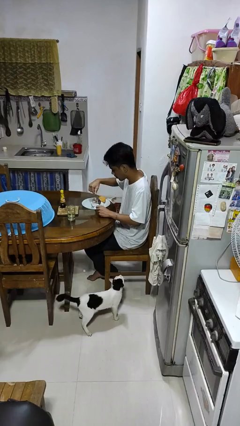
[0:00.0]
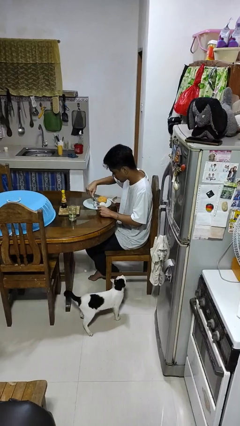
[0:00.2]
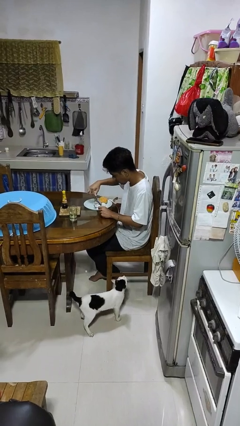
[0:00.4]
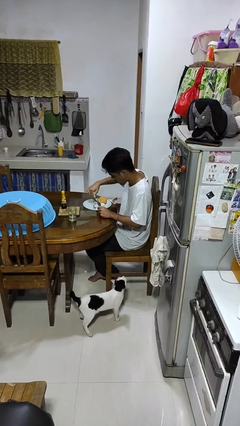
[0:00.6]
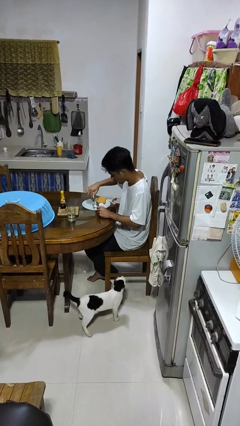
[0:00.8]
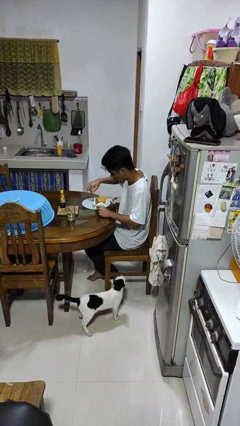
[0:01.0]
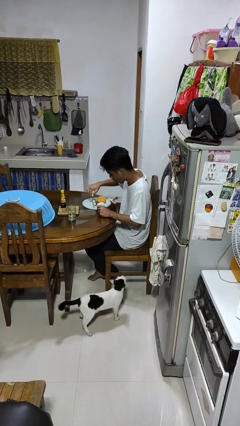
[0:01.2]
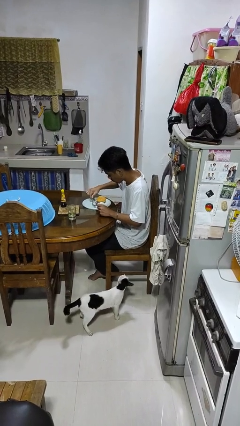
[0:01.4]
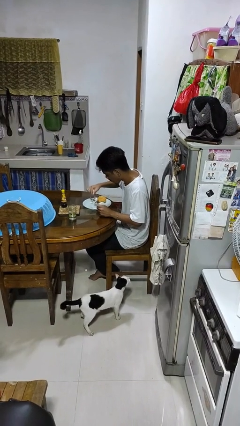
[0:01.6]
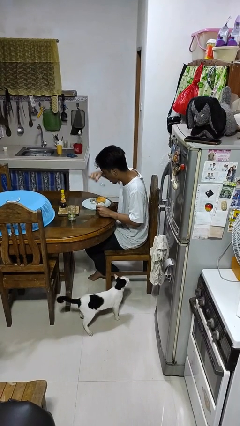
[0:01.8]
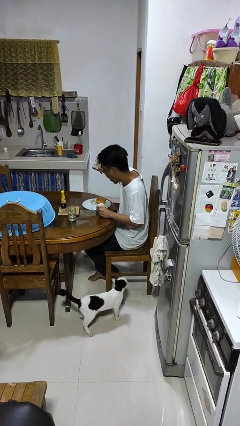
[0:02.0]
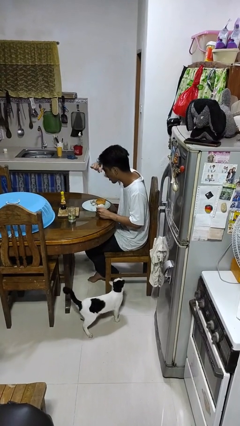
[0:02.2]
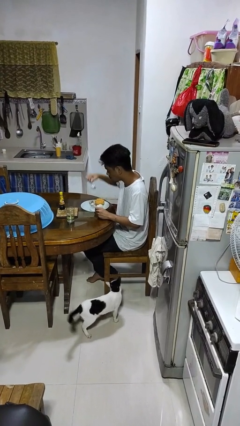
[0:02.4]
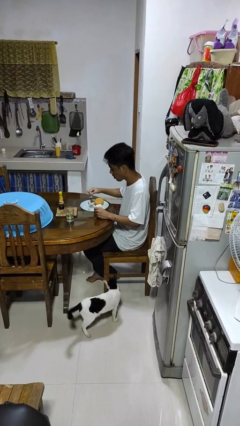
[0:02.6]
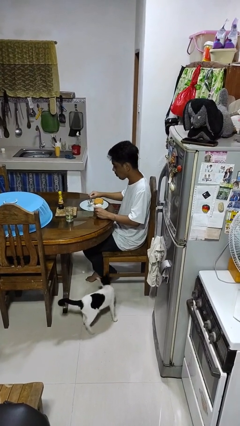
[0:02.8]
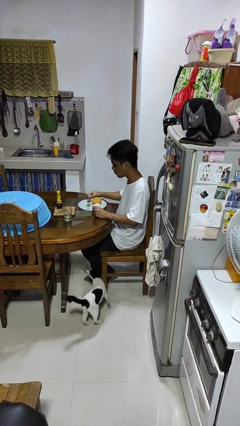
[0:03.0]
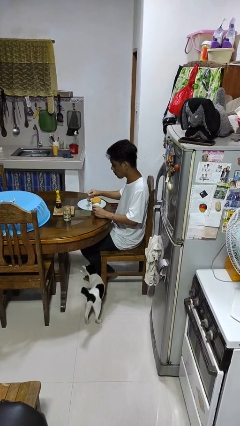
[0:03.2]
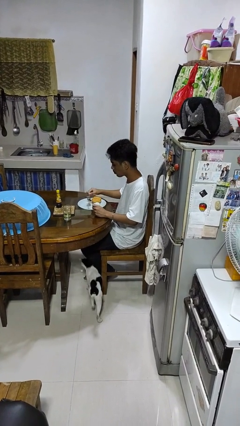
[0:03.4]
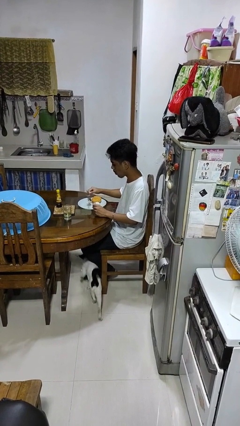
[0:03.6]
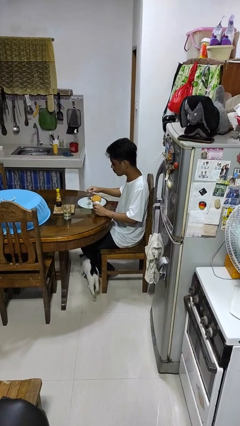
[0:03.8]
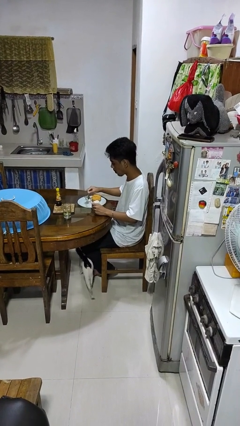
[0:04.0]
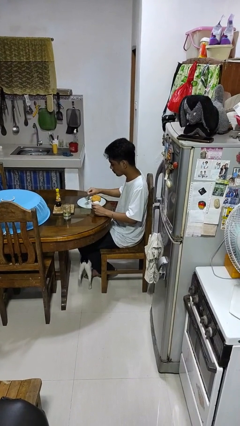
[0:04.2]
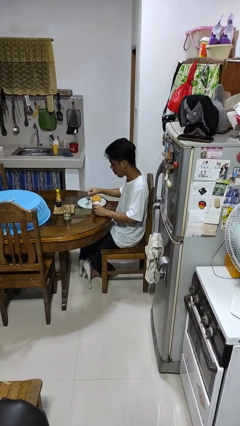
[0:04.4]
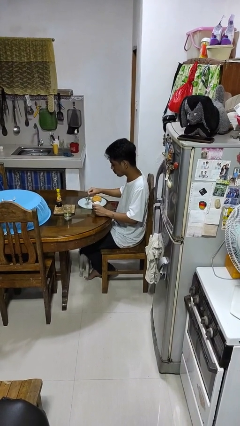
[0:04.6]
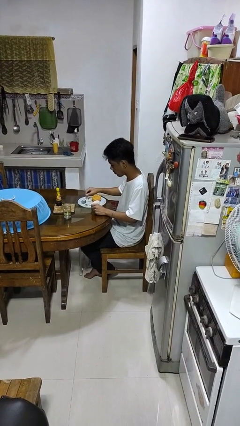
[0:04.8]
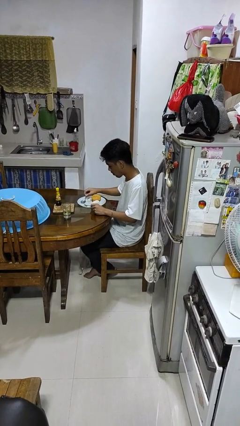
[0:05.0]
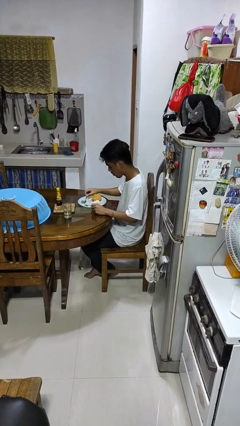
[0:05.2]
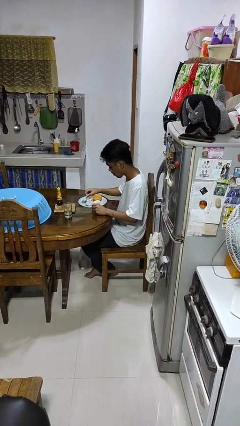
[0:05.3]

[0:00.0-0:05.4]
person eats with utensil

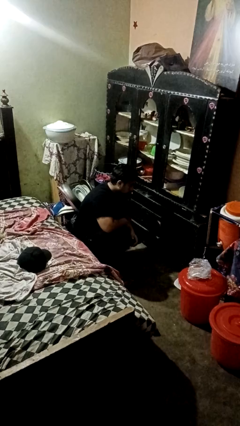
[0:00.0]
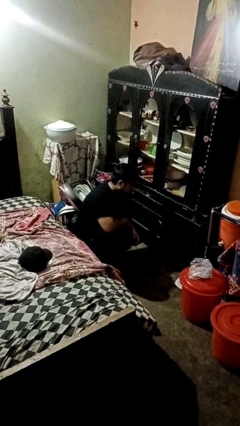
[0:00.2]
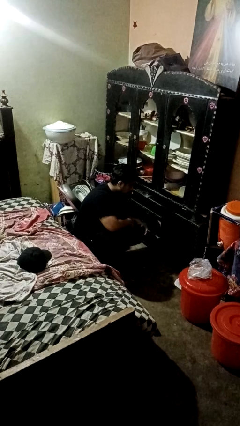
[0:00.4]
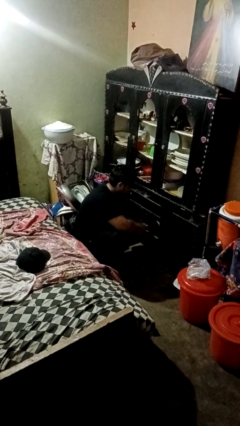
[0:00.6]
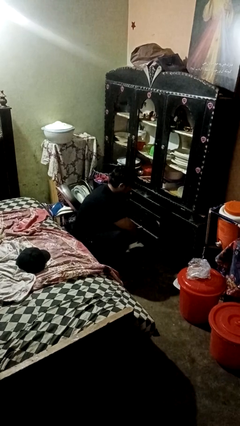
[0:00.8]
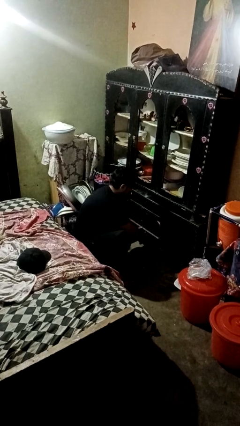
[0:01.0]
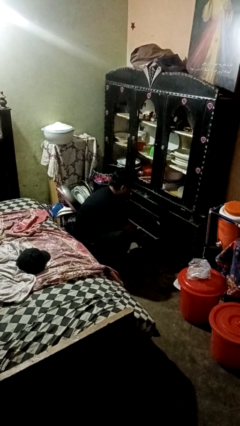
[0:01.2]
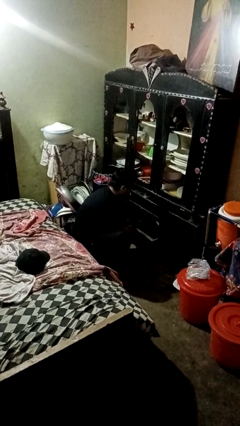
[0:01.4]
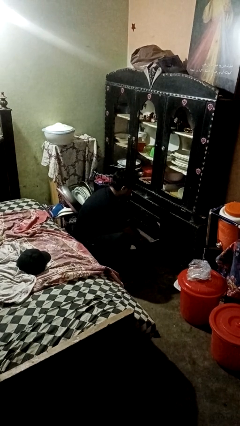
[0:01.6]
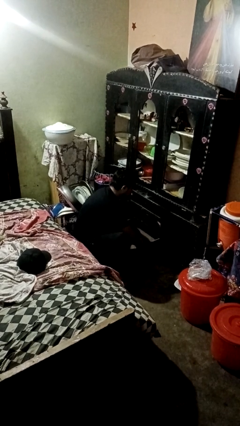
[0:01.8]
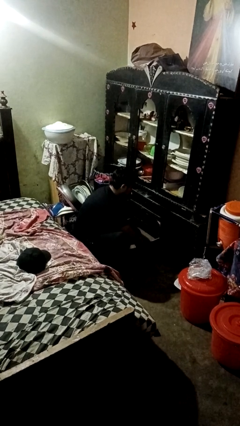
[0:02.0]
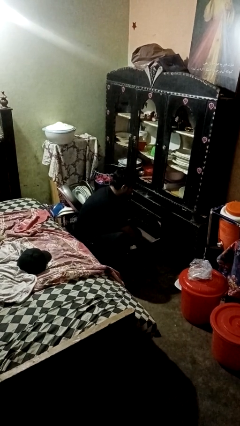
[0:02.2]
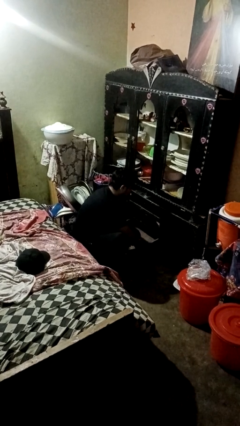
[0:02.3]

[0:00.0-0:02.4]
person opens kitchen drawer

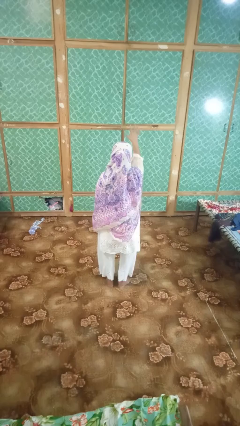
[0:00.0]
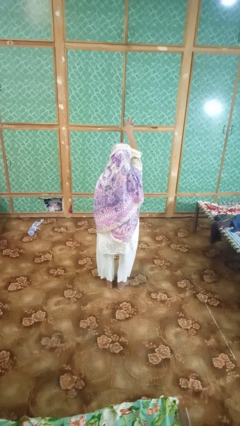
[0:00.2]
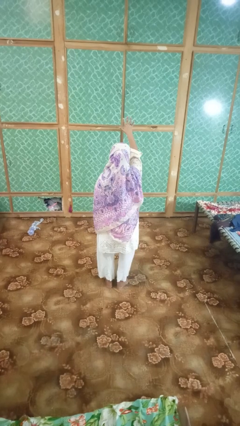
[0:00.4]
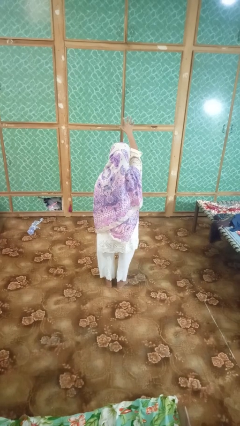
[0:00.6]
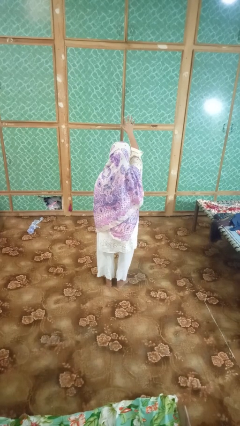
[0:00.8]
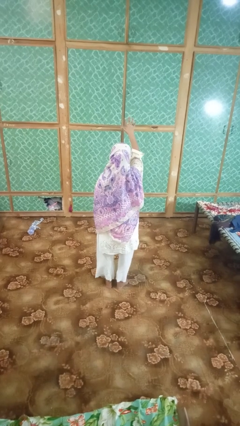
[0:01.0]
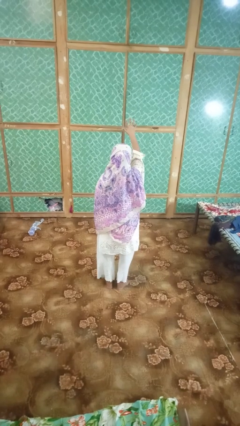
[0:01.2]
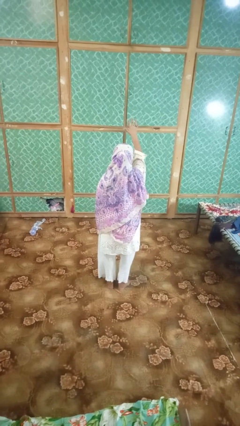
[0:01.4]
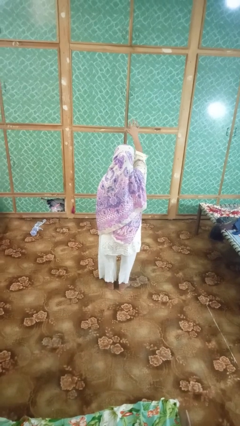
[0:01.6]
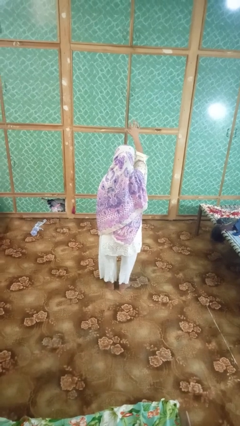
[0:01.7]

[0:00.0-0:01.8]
person gestures number five

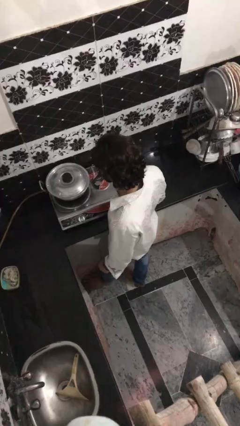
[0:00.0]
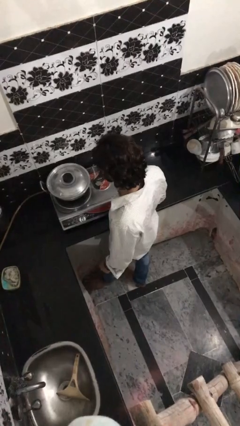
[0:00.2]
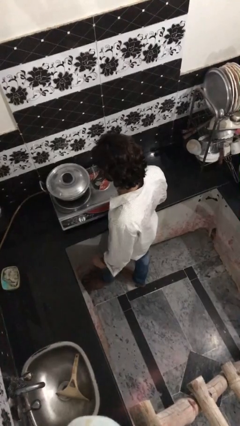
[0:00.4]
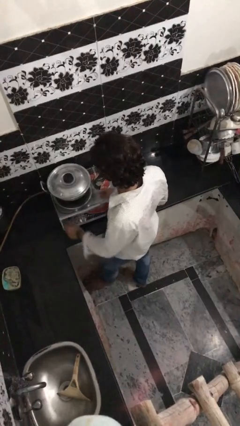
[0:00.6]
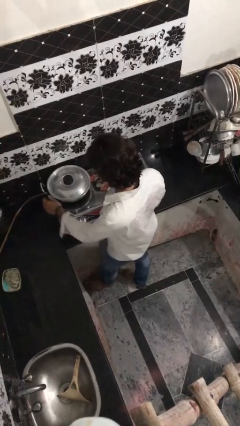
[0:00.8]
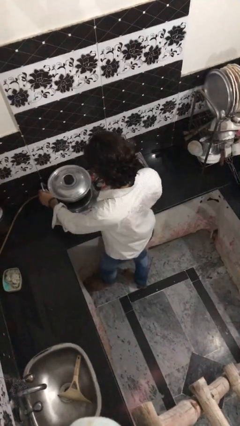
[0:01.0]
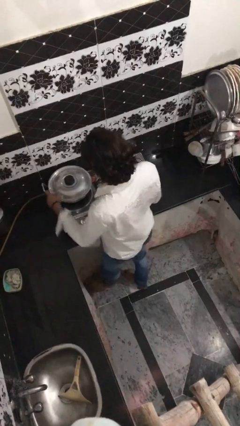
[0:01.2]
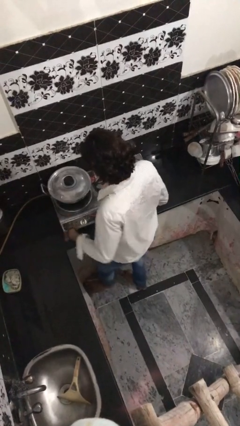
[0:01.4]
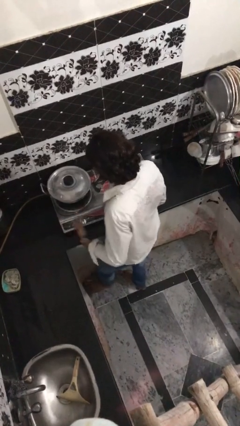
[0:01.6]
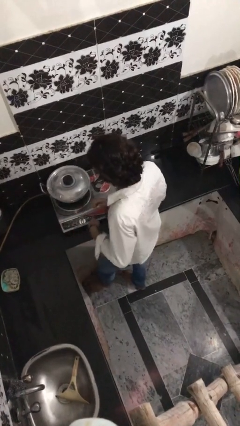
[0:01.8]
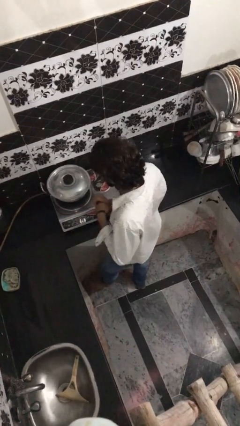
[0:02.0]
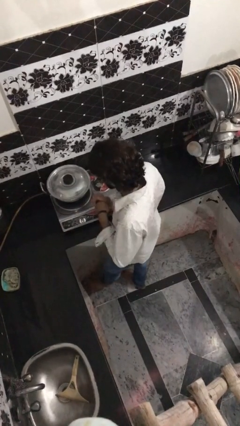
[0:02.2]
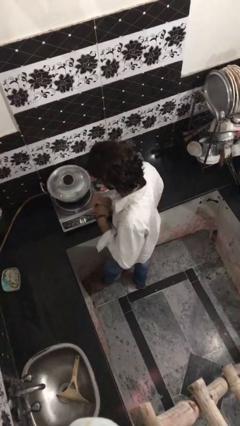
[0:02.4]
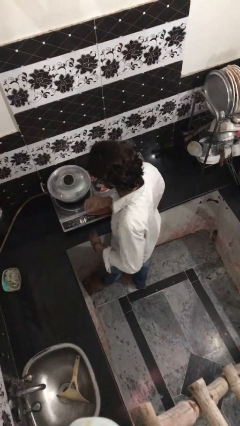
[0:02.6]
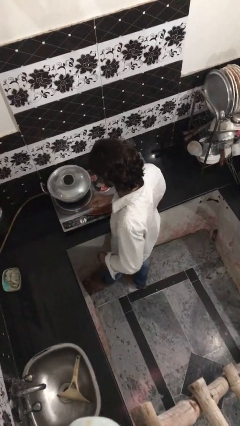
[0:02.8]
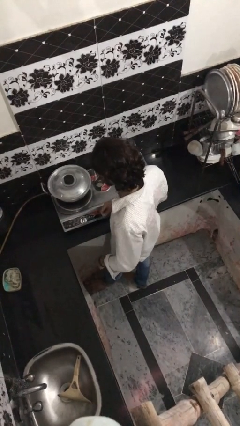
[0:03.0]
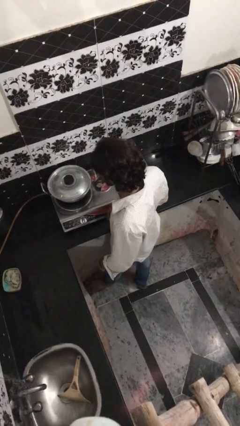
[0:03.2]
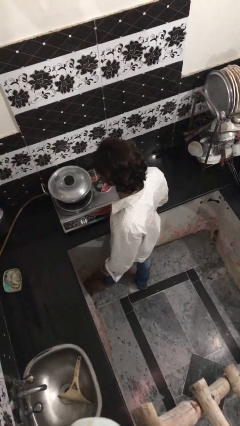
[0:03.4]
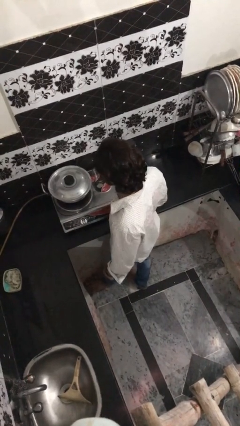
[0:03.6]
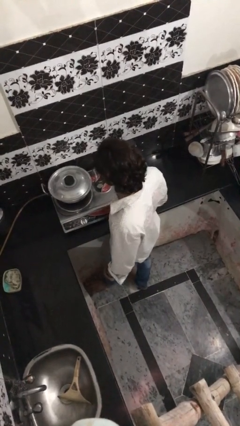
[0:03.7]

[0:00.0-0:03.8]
person burns hand

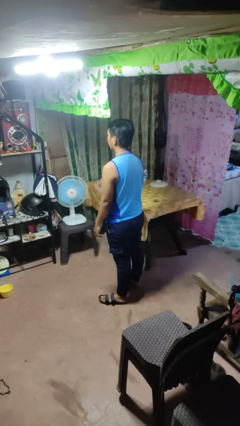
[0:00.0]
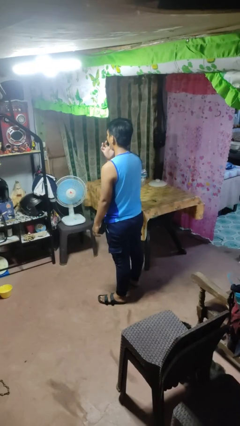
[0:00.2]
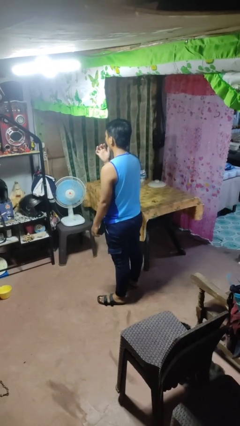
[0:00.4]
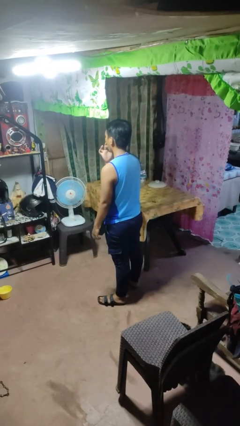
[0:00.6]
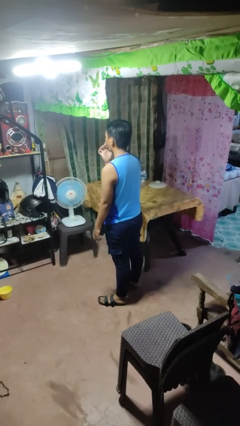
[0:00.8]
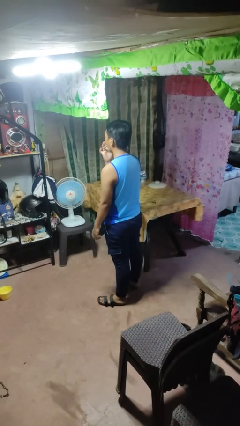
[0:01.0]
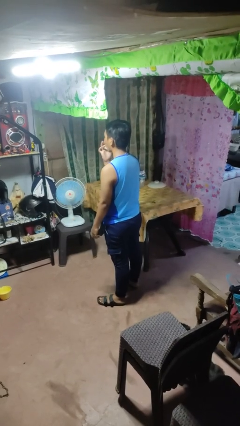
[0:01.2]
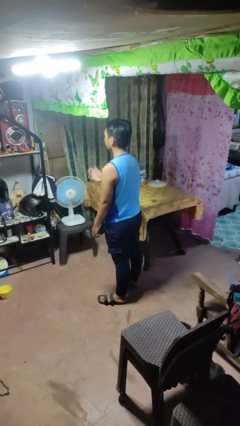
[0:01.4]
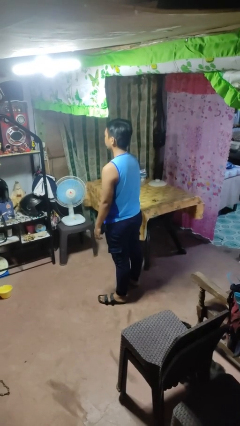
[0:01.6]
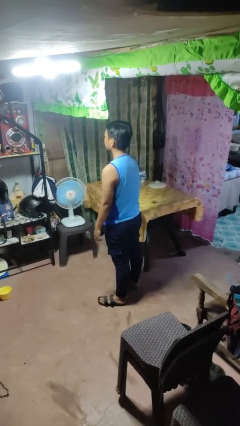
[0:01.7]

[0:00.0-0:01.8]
person licks fingers

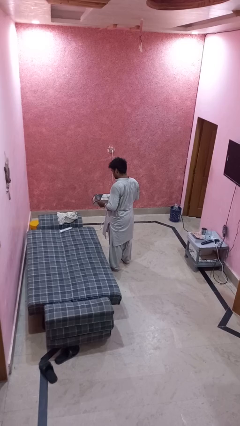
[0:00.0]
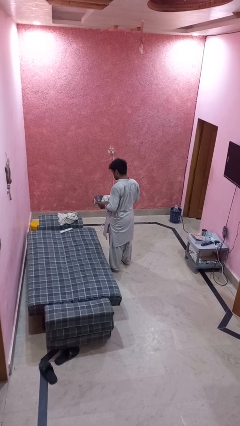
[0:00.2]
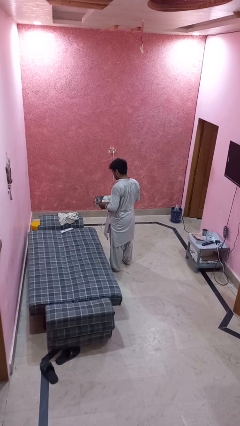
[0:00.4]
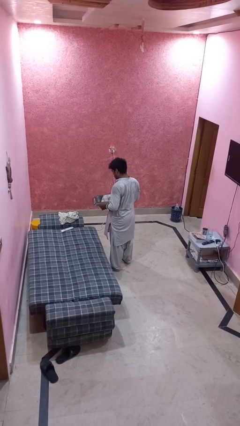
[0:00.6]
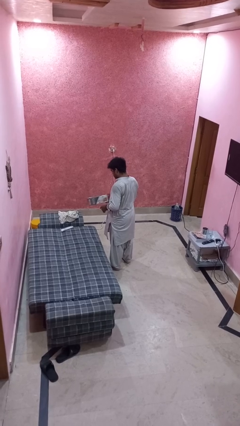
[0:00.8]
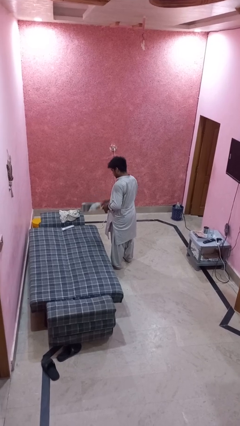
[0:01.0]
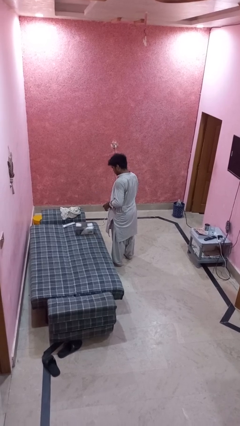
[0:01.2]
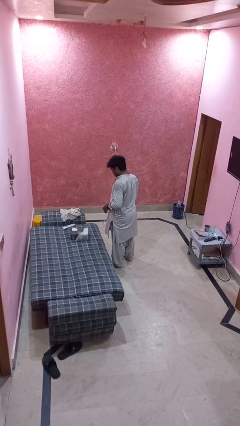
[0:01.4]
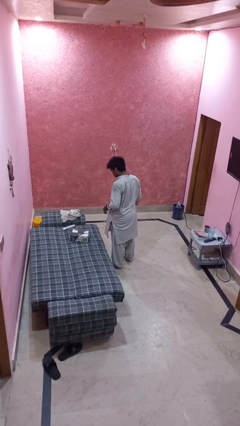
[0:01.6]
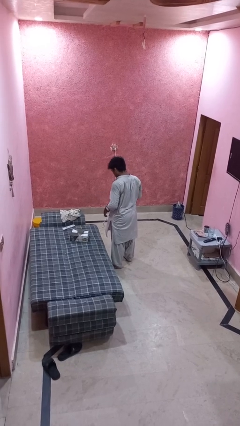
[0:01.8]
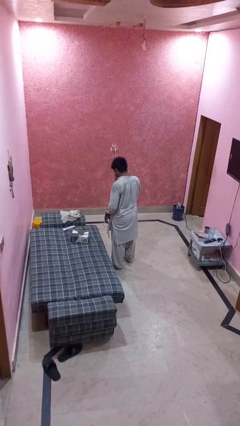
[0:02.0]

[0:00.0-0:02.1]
person throws object on bed
